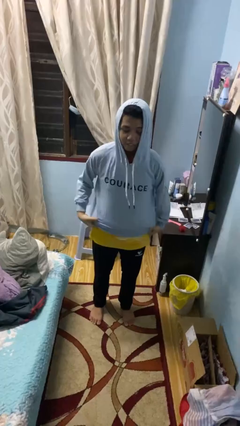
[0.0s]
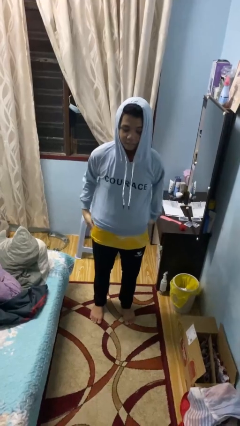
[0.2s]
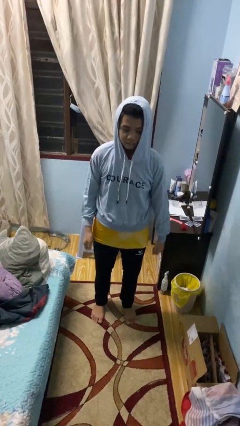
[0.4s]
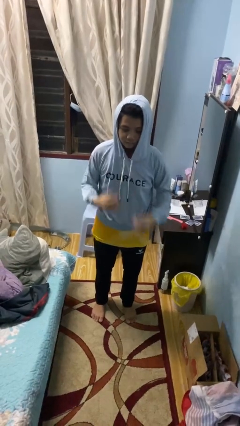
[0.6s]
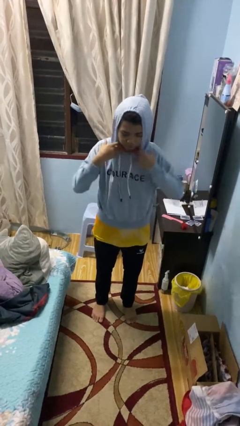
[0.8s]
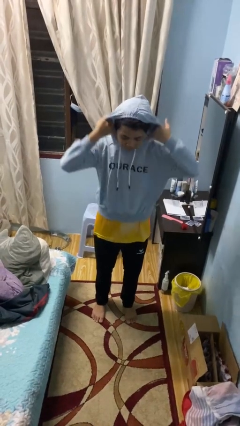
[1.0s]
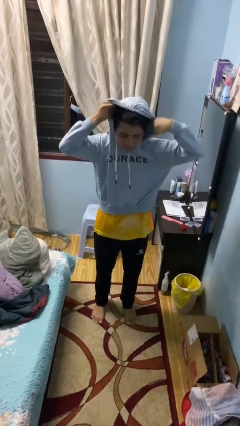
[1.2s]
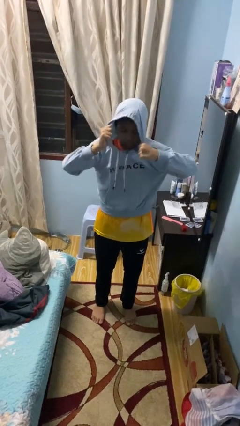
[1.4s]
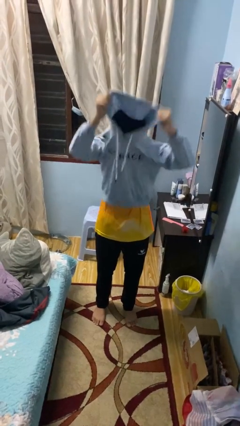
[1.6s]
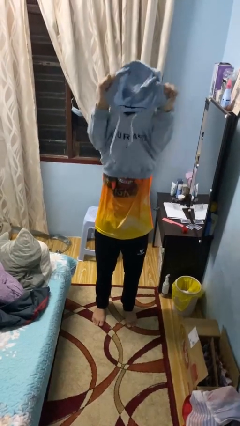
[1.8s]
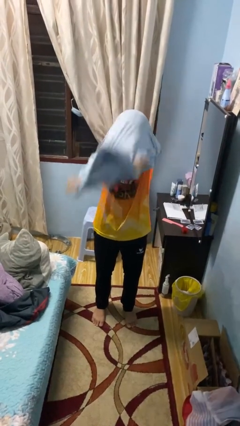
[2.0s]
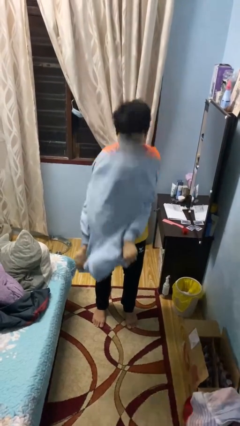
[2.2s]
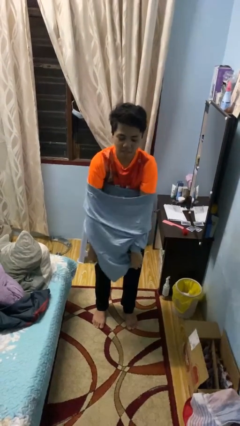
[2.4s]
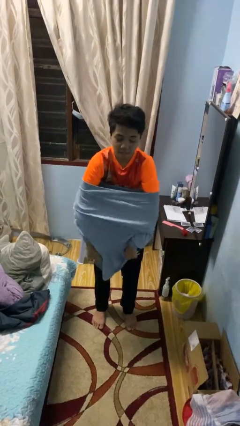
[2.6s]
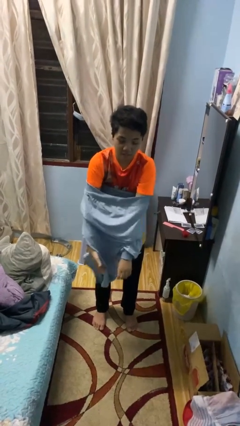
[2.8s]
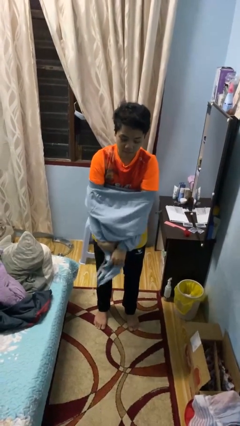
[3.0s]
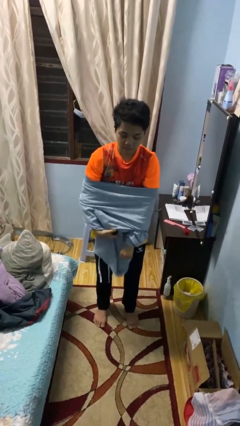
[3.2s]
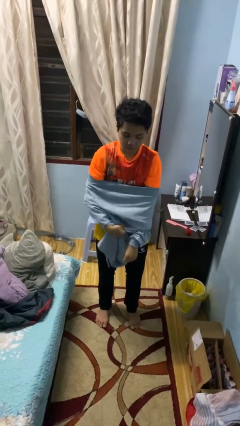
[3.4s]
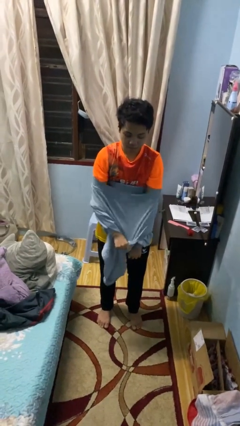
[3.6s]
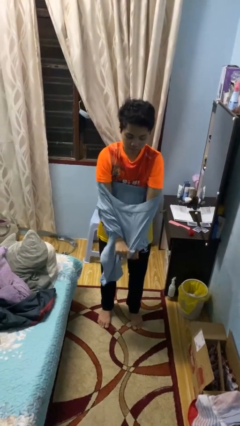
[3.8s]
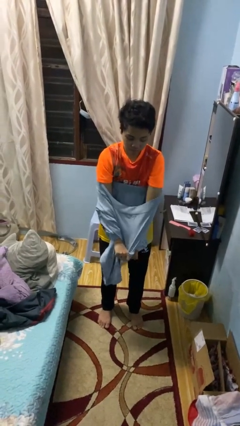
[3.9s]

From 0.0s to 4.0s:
person takes off hoodie

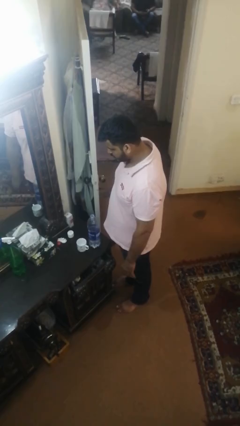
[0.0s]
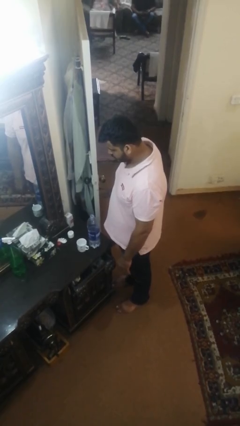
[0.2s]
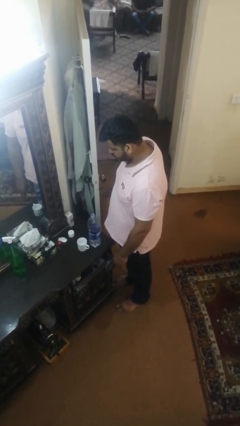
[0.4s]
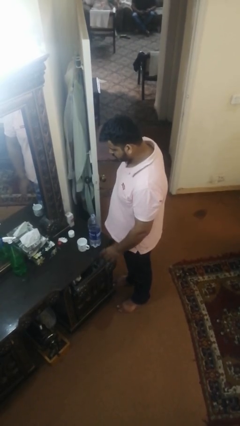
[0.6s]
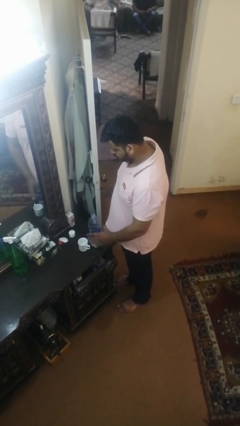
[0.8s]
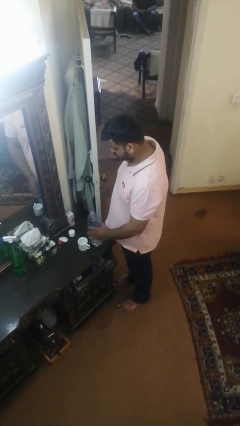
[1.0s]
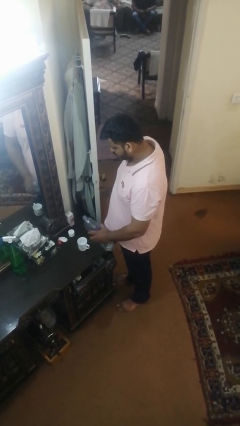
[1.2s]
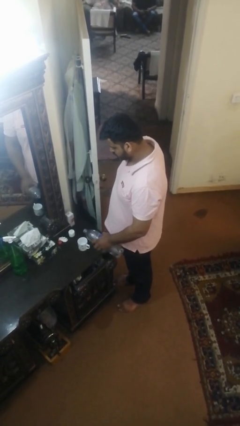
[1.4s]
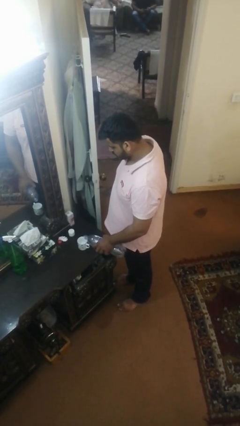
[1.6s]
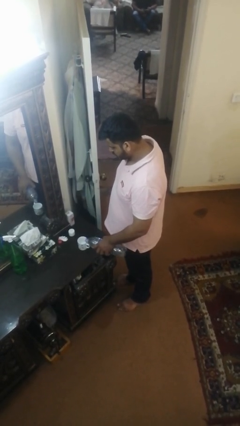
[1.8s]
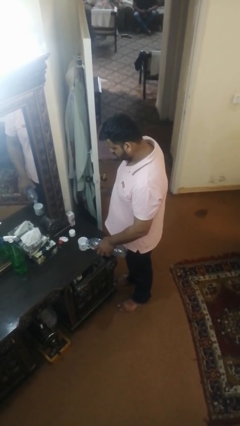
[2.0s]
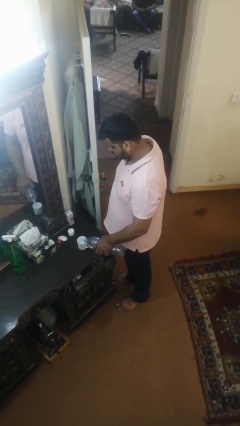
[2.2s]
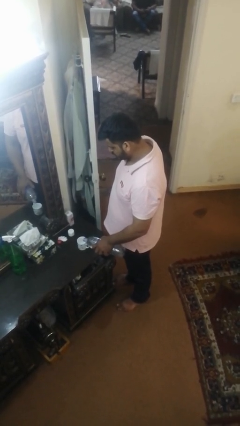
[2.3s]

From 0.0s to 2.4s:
person pours liquid into cup

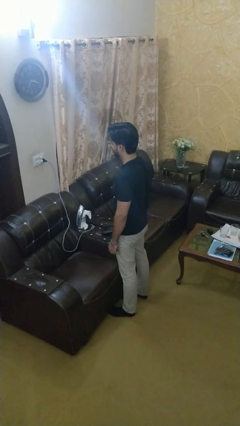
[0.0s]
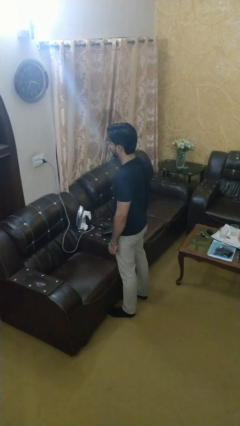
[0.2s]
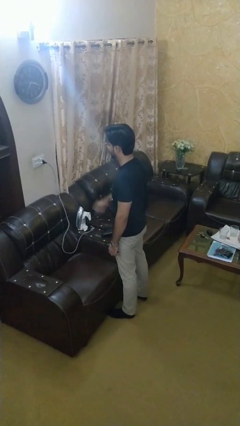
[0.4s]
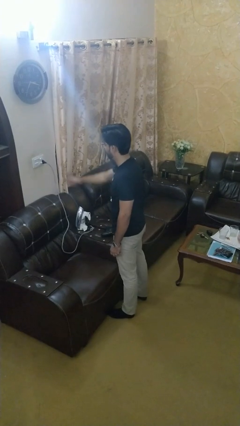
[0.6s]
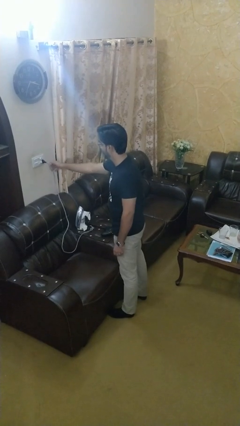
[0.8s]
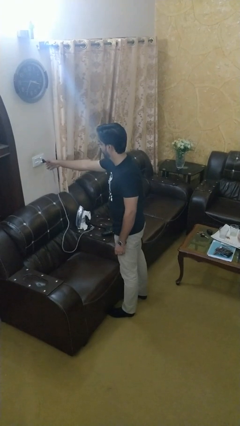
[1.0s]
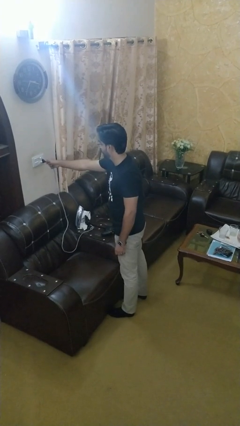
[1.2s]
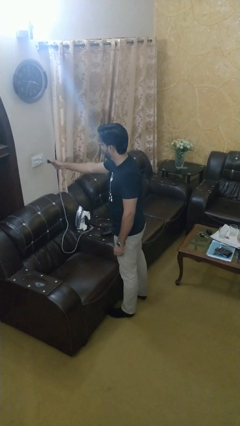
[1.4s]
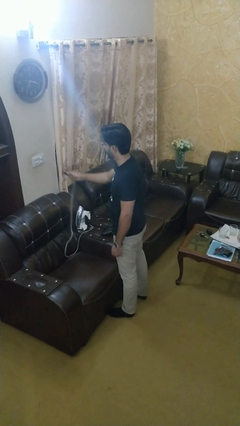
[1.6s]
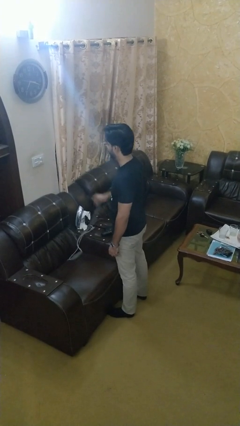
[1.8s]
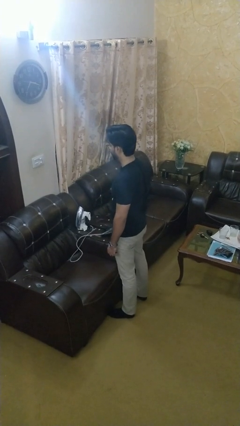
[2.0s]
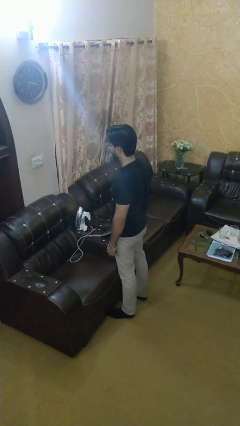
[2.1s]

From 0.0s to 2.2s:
person unplugs from electrical socket

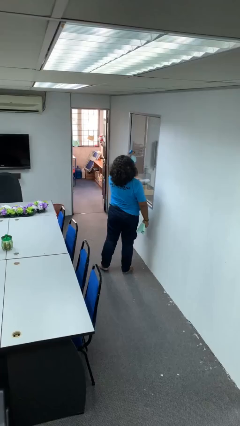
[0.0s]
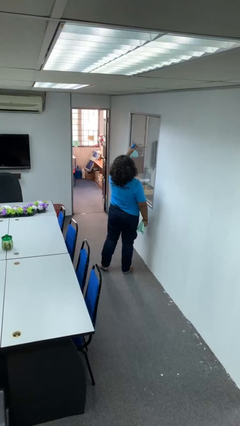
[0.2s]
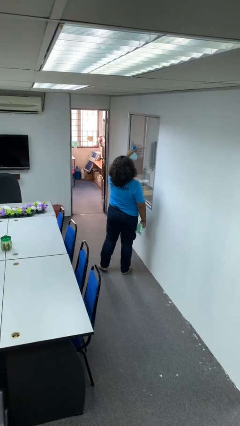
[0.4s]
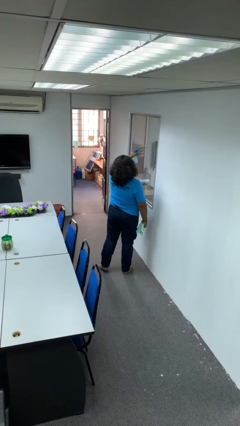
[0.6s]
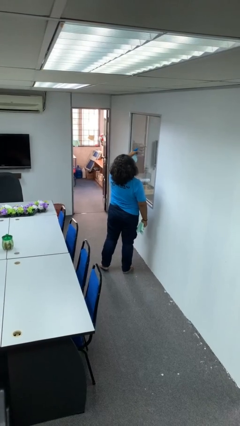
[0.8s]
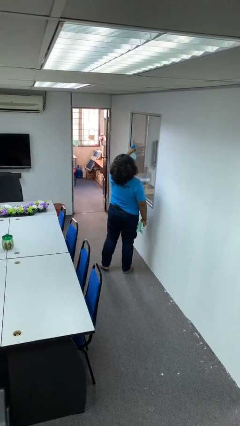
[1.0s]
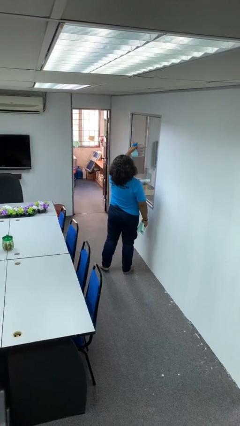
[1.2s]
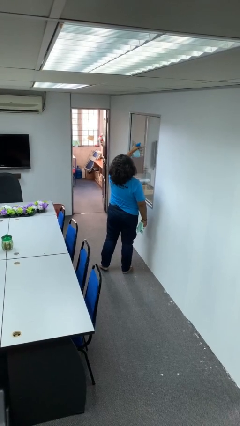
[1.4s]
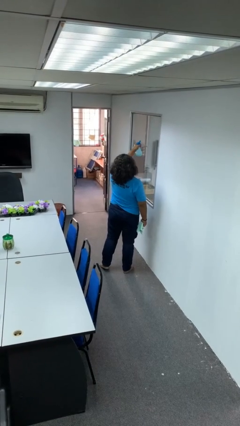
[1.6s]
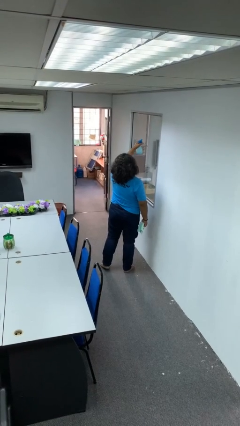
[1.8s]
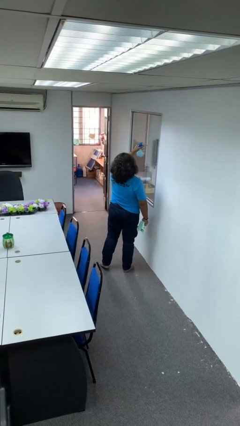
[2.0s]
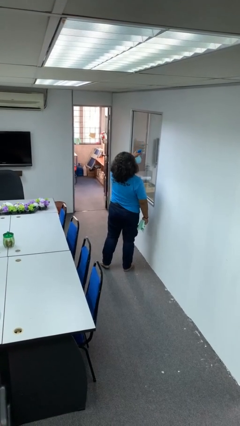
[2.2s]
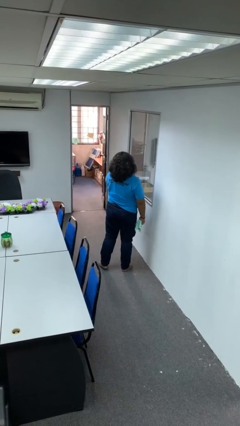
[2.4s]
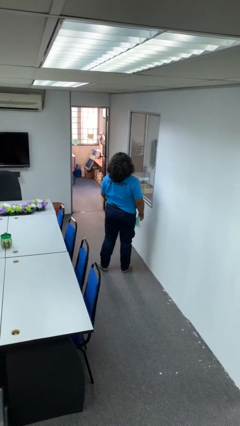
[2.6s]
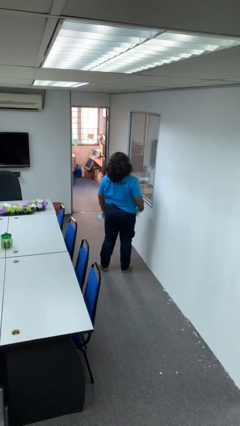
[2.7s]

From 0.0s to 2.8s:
person sprays from bottle

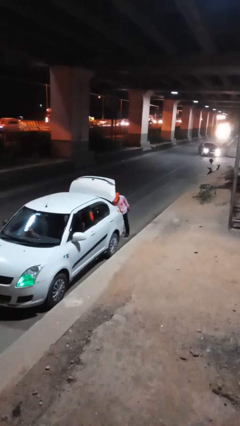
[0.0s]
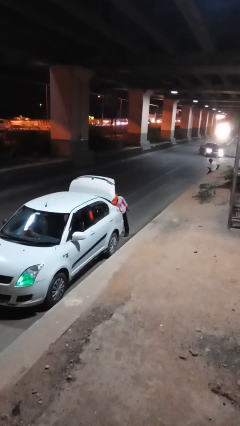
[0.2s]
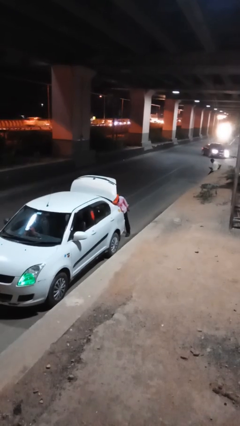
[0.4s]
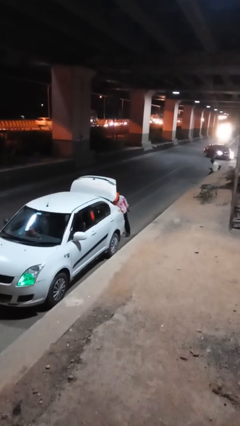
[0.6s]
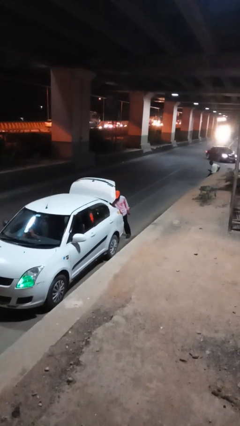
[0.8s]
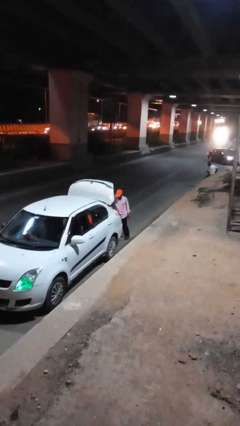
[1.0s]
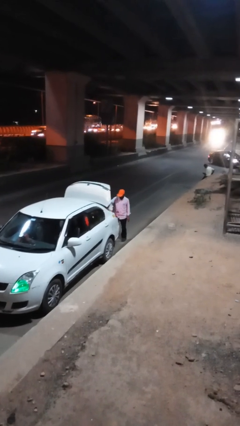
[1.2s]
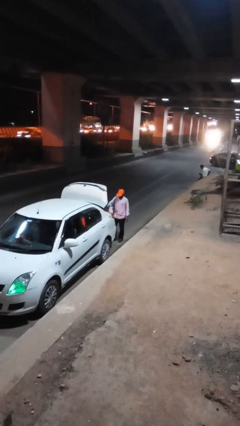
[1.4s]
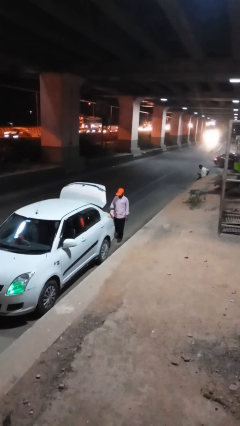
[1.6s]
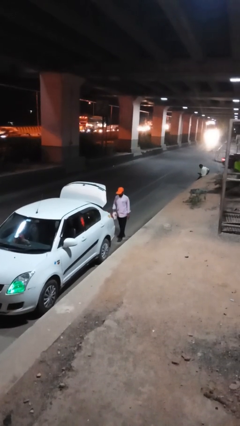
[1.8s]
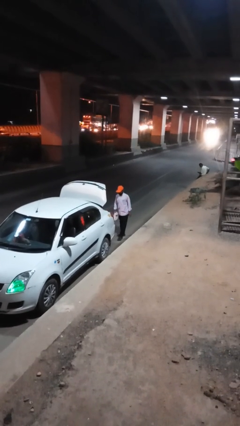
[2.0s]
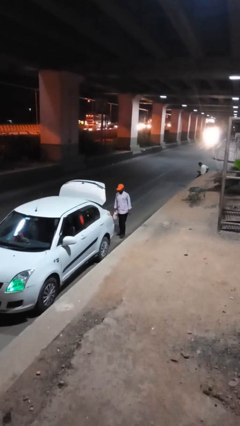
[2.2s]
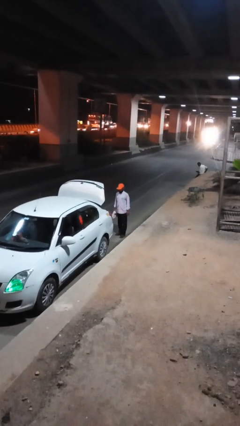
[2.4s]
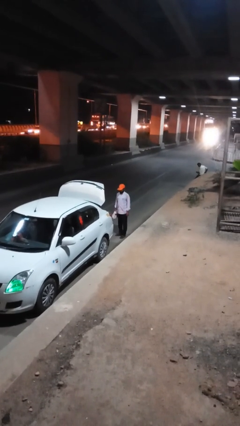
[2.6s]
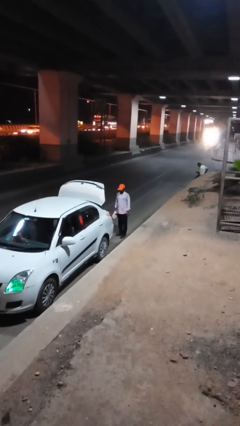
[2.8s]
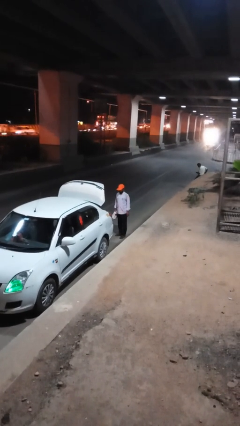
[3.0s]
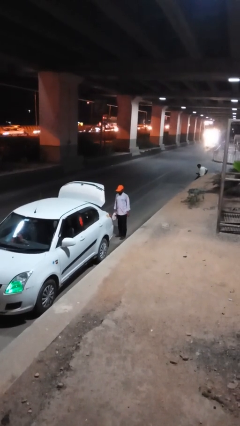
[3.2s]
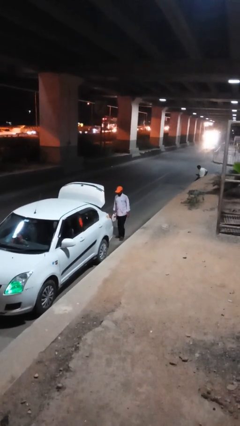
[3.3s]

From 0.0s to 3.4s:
person unloads car

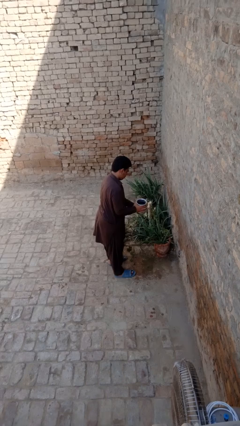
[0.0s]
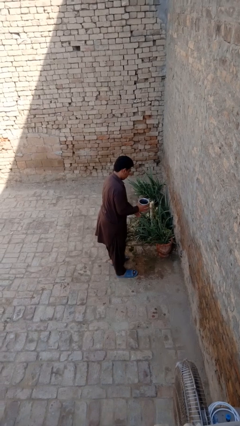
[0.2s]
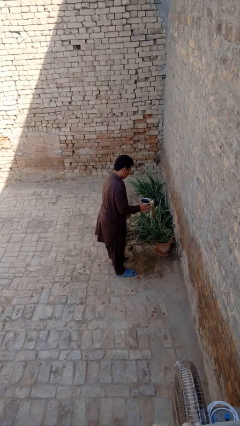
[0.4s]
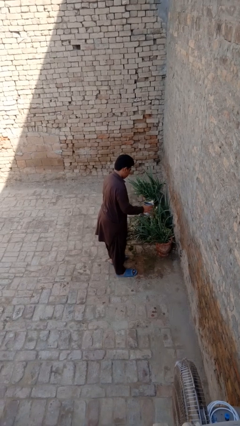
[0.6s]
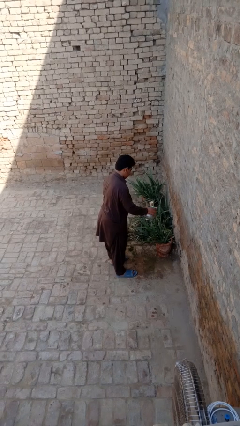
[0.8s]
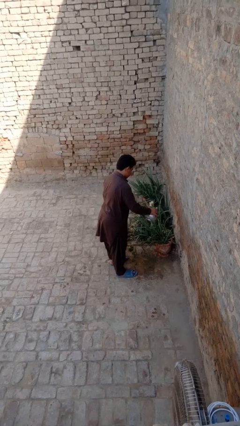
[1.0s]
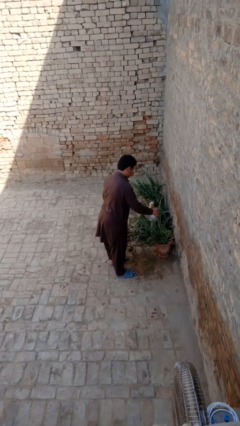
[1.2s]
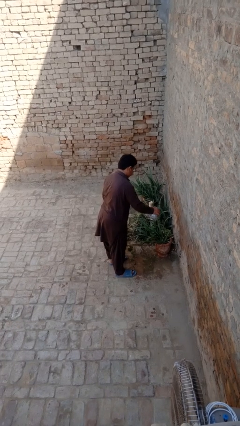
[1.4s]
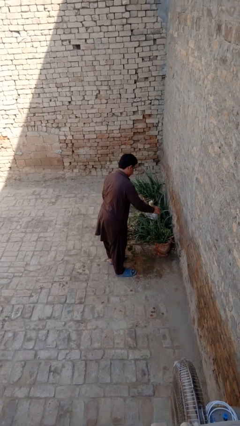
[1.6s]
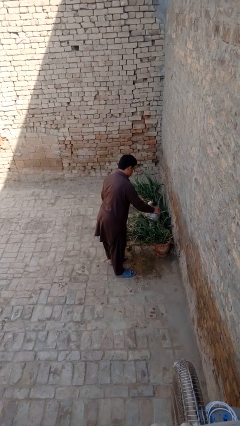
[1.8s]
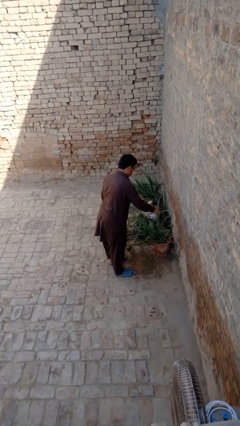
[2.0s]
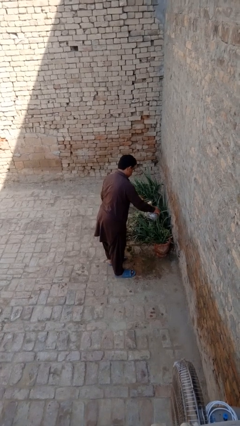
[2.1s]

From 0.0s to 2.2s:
person waters houseplant

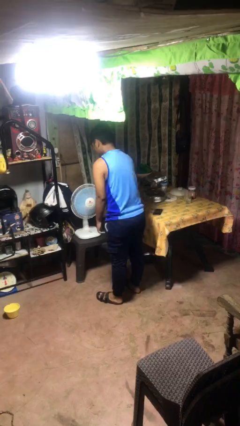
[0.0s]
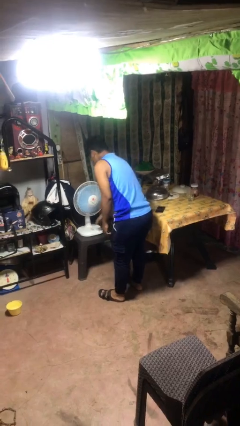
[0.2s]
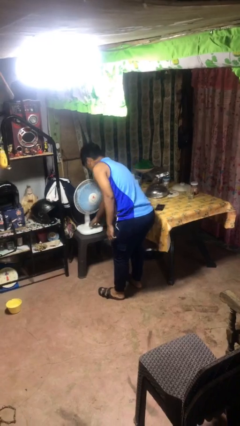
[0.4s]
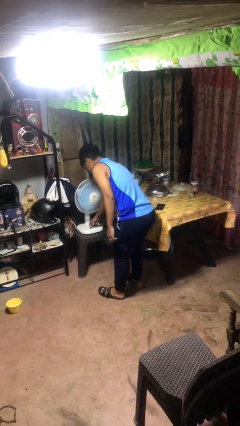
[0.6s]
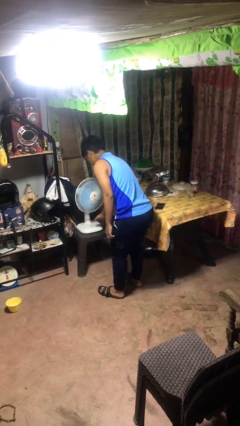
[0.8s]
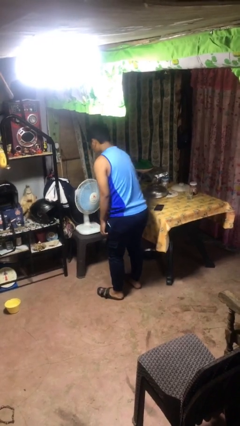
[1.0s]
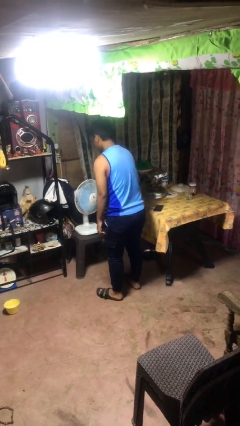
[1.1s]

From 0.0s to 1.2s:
person turns off fan
